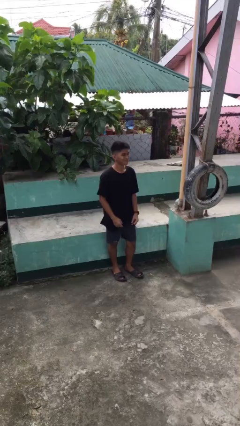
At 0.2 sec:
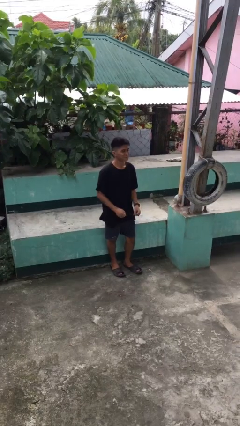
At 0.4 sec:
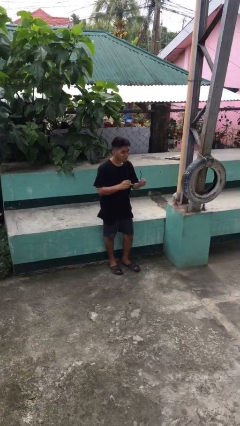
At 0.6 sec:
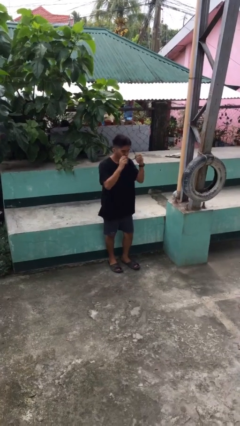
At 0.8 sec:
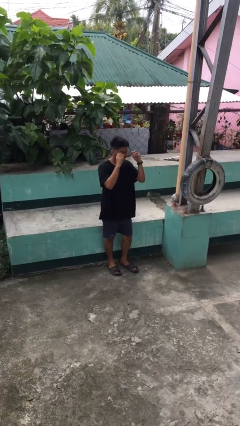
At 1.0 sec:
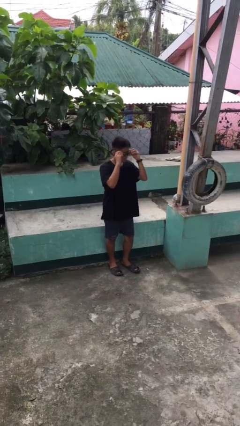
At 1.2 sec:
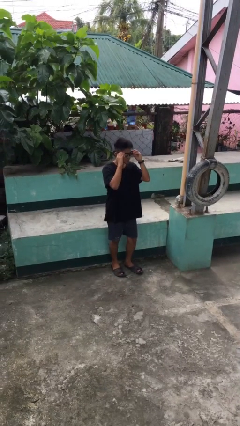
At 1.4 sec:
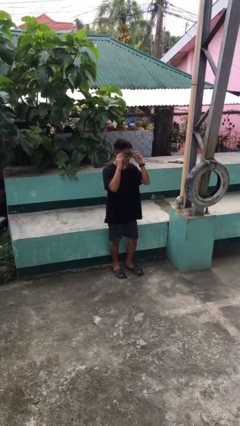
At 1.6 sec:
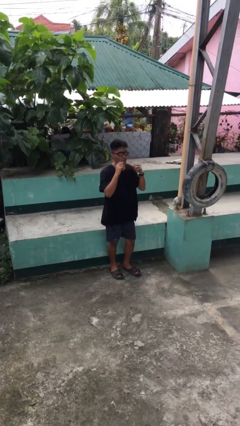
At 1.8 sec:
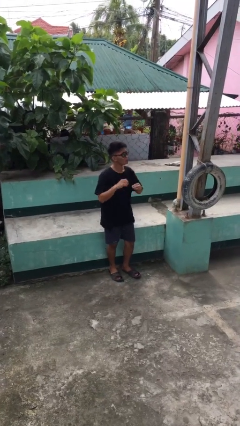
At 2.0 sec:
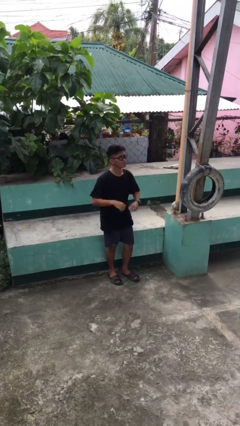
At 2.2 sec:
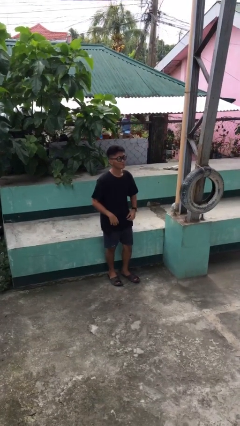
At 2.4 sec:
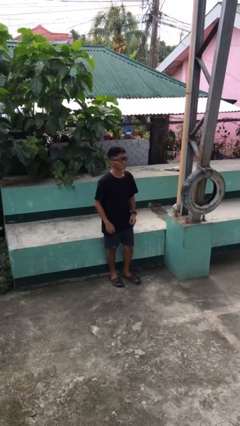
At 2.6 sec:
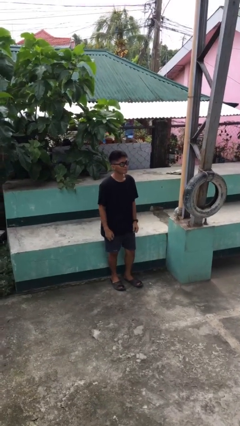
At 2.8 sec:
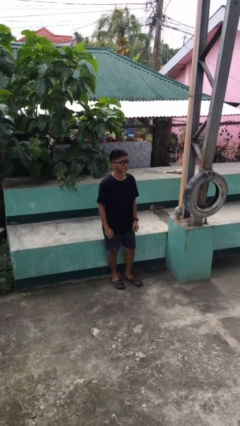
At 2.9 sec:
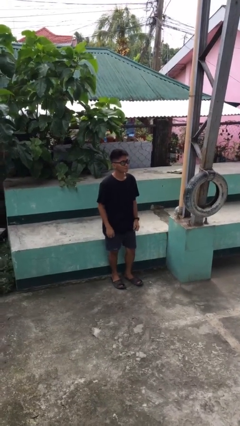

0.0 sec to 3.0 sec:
person puts on sunglasses

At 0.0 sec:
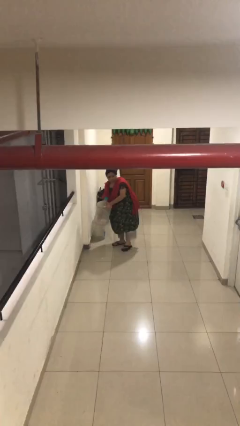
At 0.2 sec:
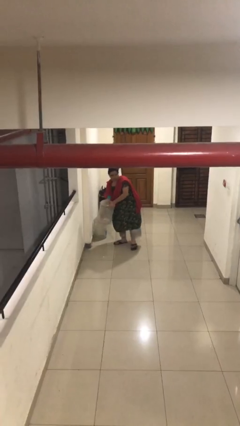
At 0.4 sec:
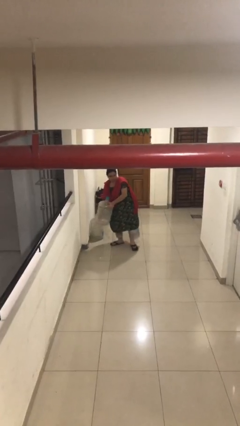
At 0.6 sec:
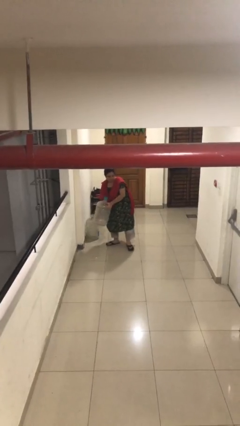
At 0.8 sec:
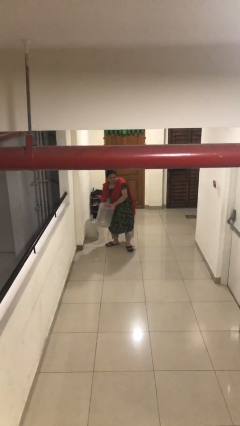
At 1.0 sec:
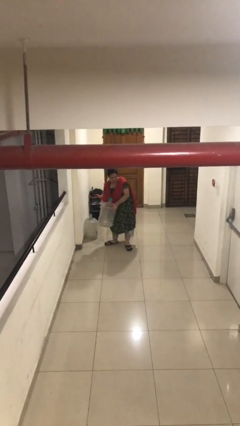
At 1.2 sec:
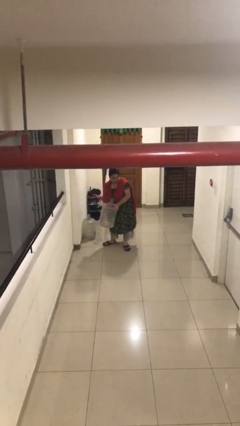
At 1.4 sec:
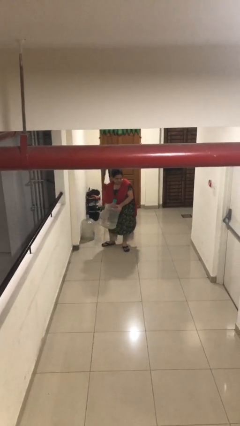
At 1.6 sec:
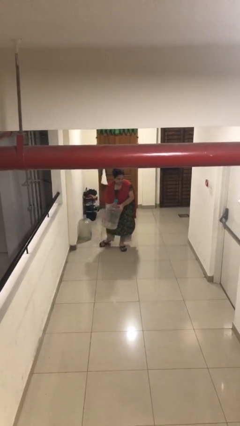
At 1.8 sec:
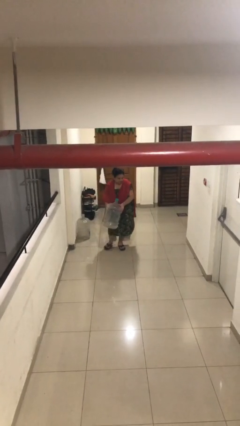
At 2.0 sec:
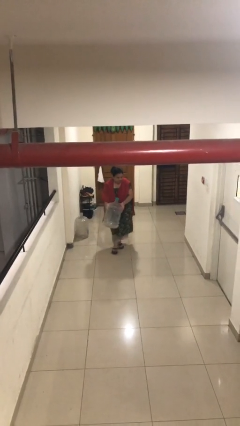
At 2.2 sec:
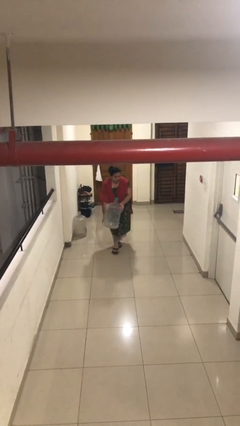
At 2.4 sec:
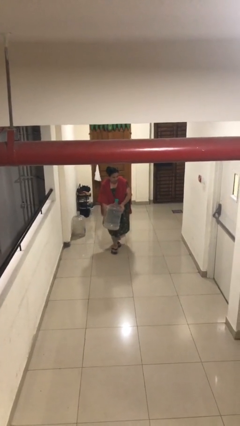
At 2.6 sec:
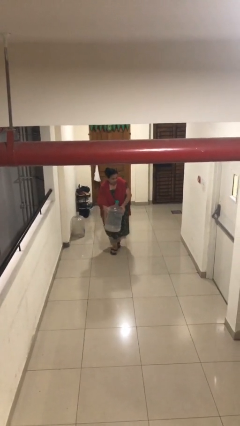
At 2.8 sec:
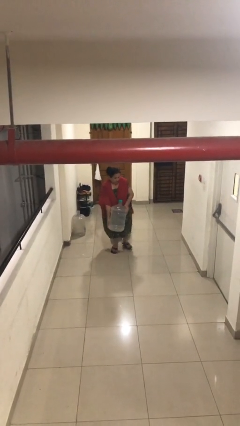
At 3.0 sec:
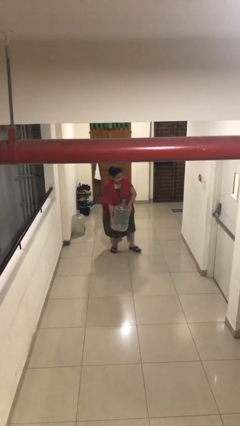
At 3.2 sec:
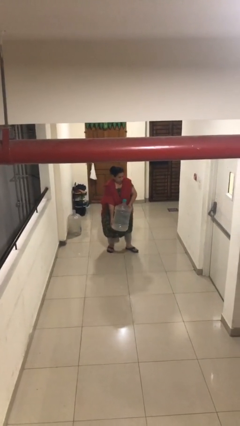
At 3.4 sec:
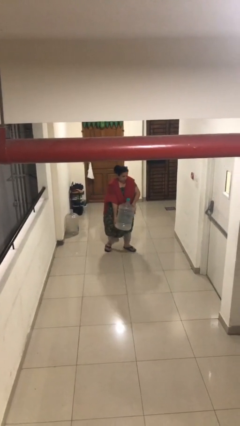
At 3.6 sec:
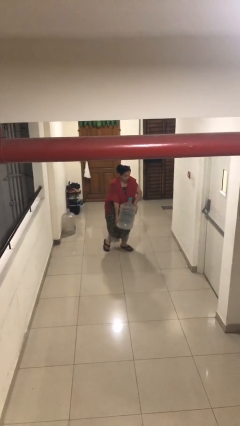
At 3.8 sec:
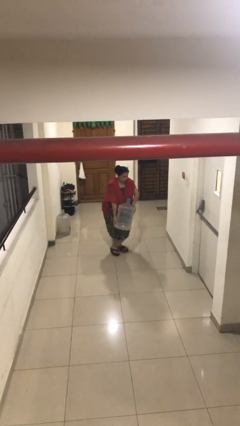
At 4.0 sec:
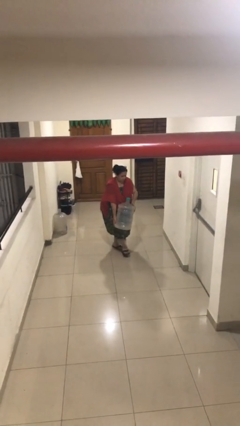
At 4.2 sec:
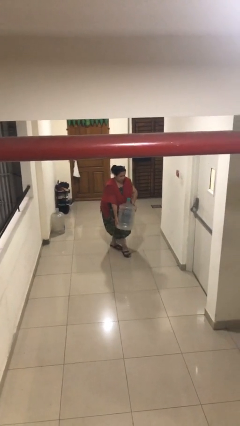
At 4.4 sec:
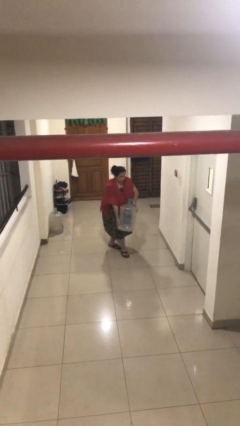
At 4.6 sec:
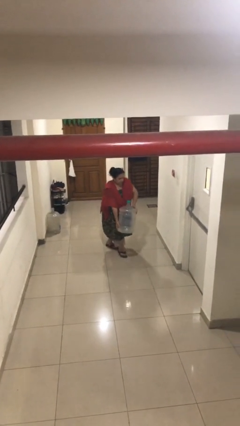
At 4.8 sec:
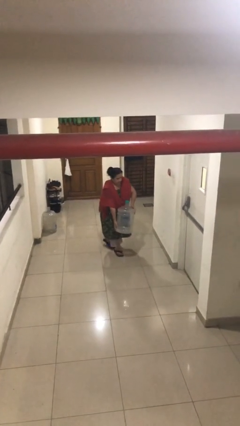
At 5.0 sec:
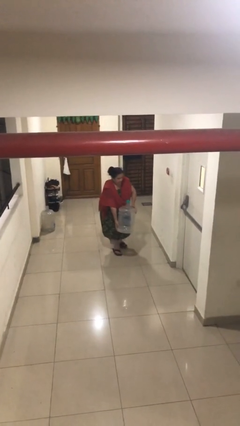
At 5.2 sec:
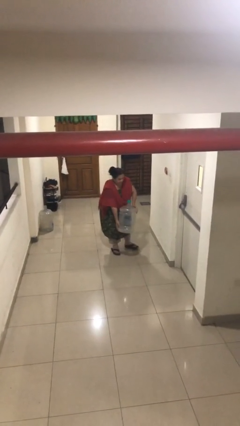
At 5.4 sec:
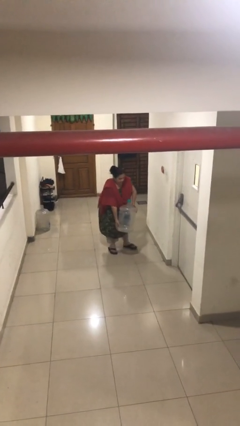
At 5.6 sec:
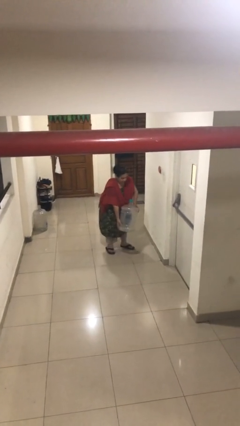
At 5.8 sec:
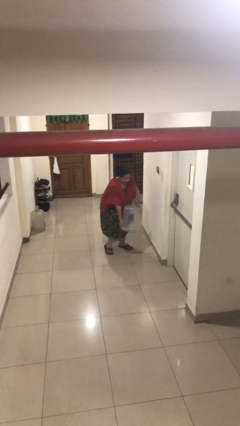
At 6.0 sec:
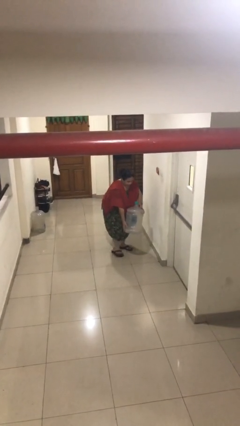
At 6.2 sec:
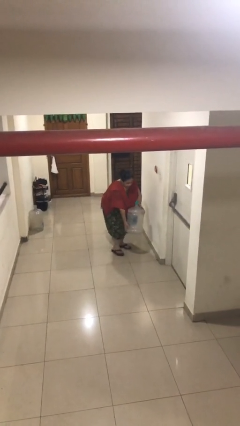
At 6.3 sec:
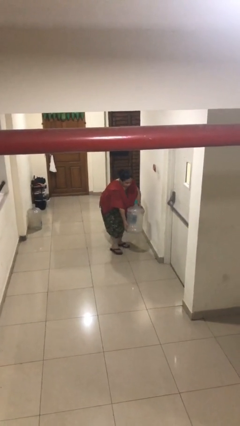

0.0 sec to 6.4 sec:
person carries heavy object

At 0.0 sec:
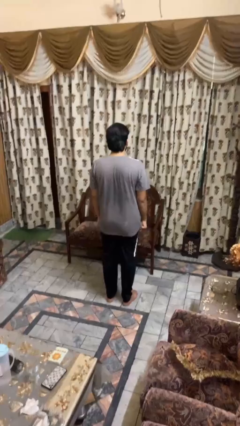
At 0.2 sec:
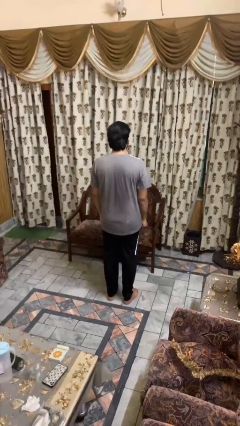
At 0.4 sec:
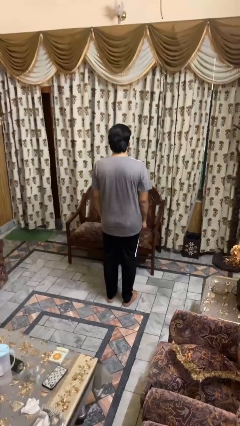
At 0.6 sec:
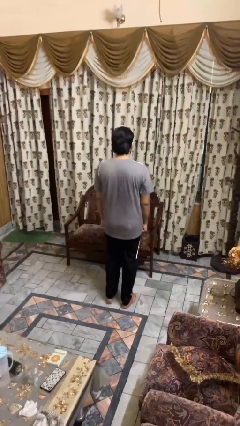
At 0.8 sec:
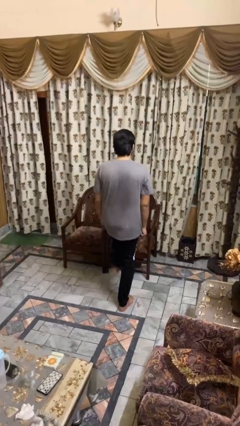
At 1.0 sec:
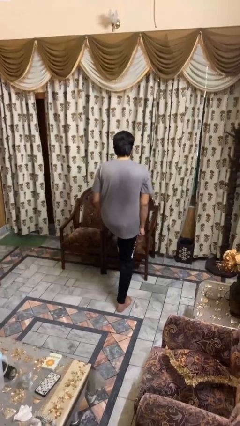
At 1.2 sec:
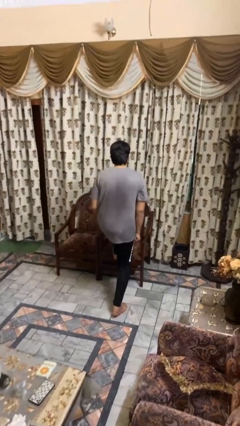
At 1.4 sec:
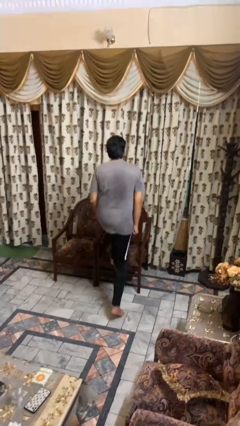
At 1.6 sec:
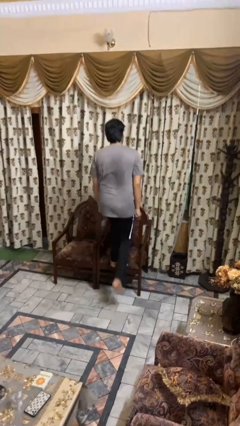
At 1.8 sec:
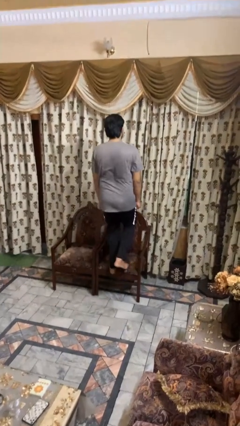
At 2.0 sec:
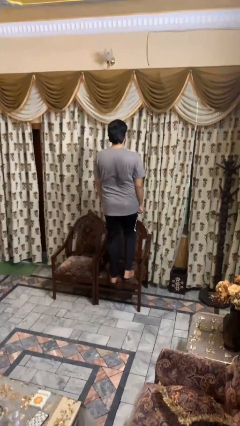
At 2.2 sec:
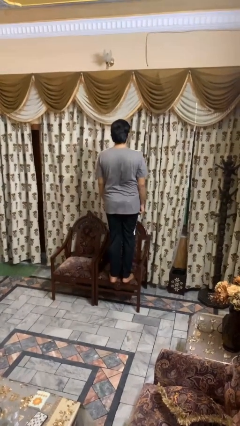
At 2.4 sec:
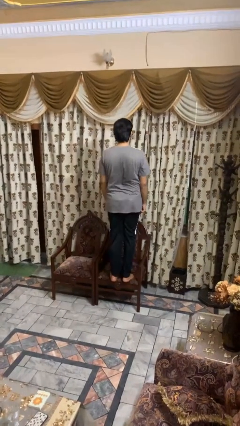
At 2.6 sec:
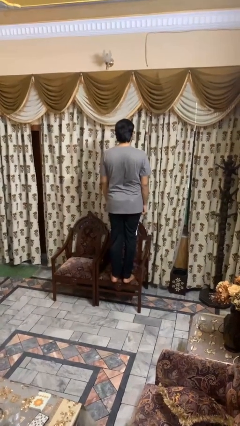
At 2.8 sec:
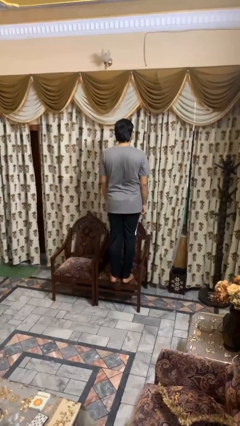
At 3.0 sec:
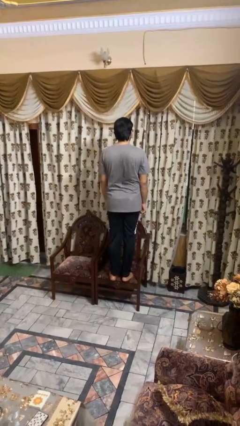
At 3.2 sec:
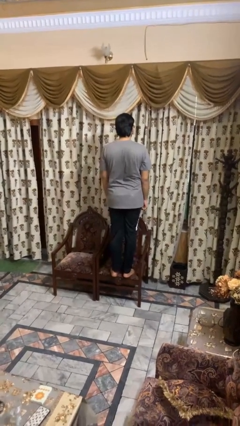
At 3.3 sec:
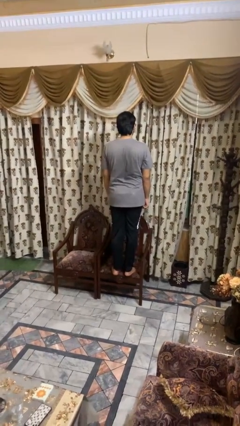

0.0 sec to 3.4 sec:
person climbs on chair

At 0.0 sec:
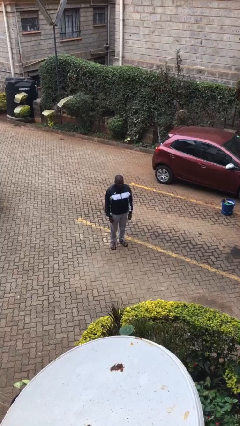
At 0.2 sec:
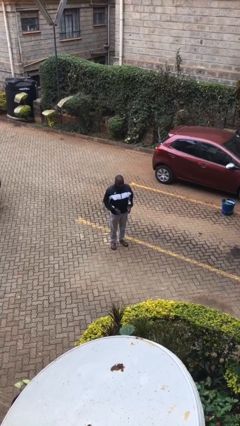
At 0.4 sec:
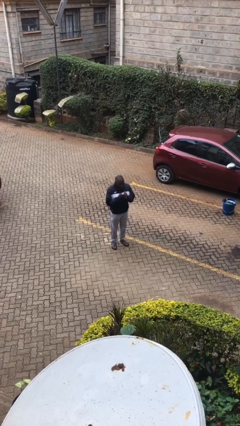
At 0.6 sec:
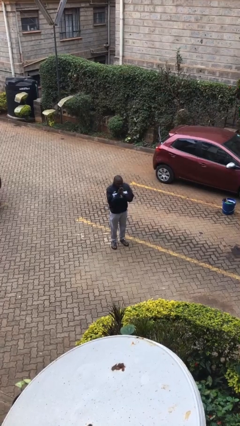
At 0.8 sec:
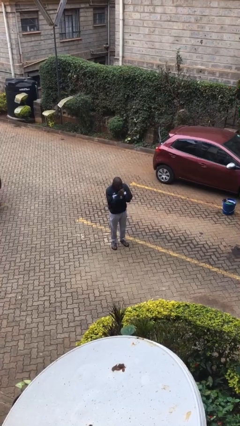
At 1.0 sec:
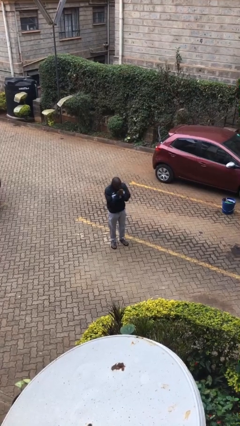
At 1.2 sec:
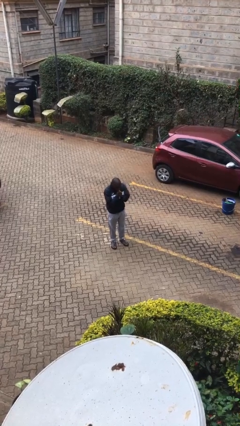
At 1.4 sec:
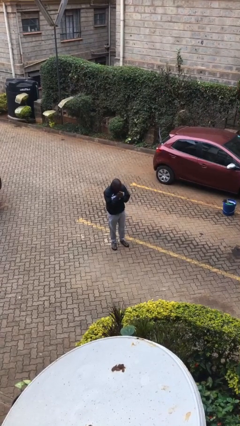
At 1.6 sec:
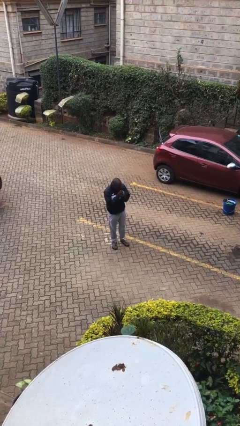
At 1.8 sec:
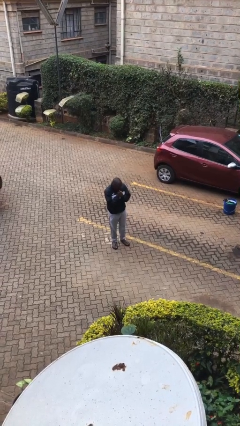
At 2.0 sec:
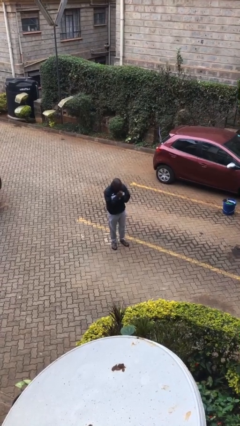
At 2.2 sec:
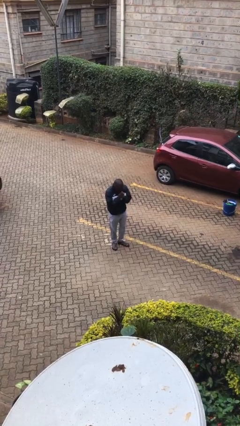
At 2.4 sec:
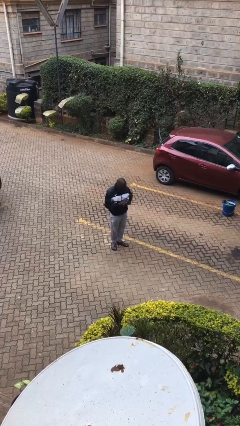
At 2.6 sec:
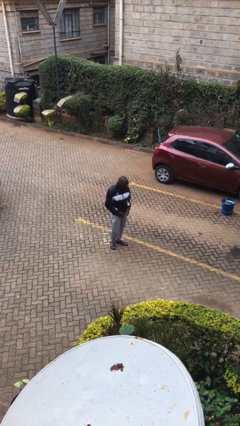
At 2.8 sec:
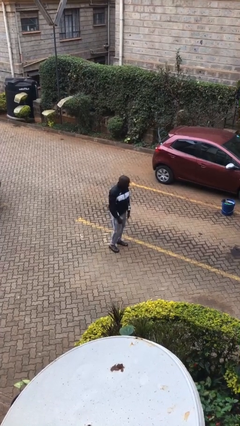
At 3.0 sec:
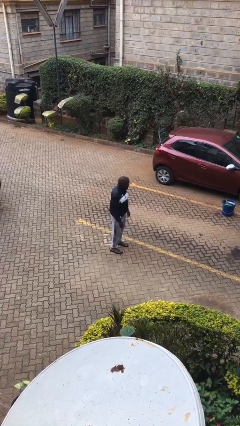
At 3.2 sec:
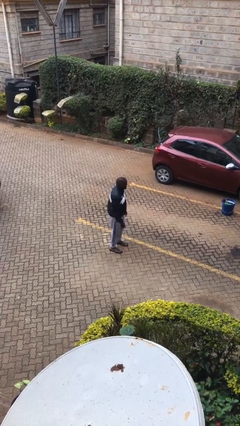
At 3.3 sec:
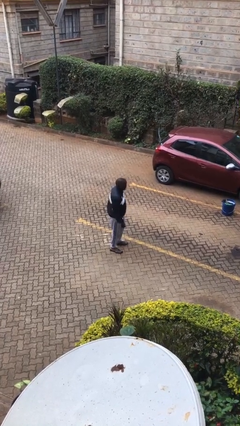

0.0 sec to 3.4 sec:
person blows into hands

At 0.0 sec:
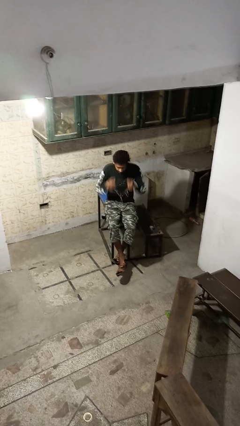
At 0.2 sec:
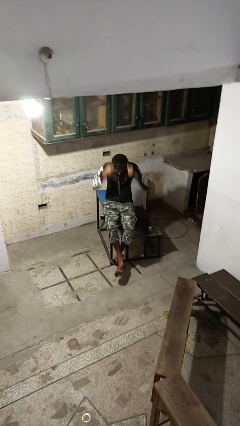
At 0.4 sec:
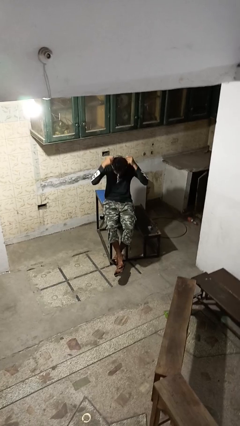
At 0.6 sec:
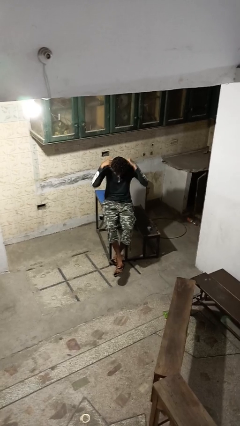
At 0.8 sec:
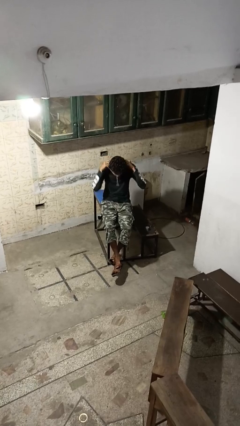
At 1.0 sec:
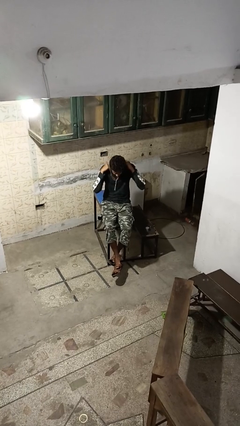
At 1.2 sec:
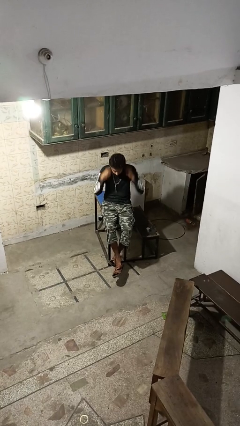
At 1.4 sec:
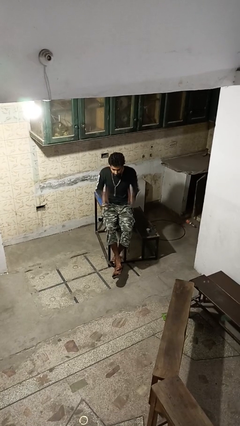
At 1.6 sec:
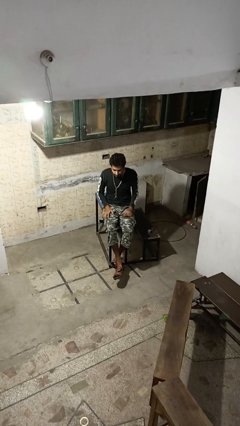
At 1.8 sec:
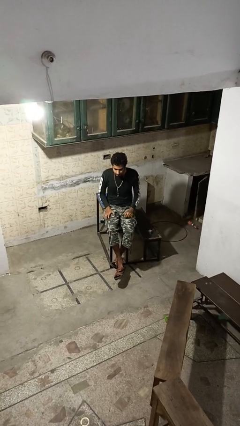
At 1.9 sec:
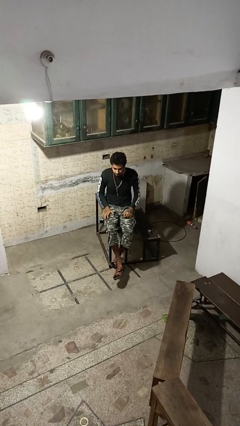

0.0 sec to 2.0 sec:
person puts on necklace
